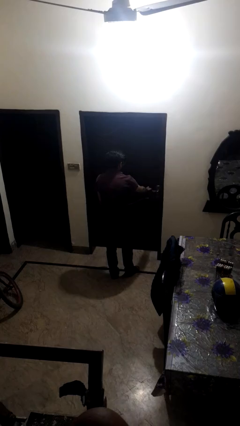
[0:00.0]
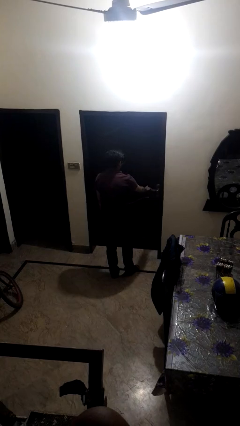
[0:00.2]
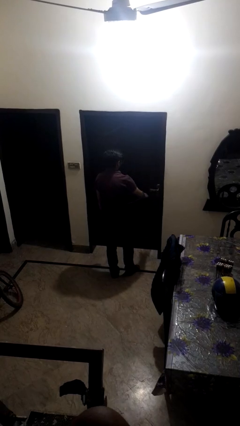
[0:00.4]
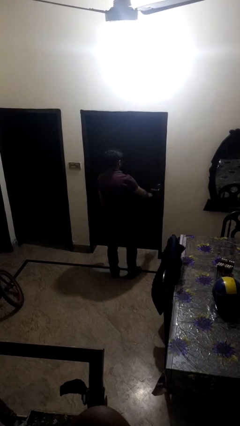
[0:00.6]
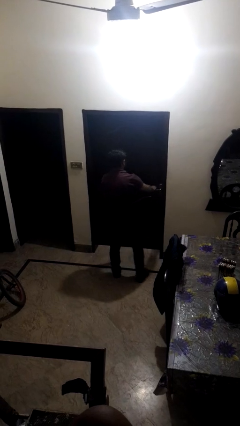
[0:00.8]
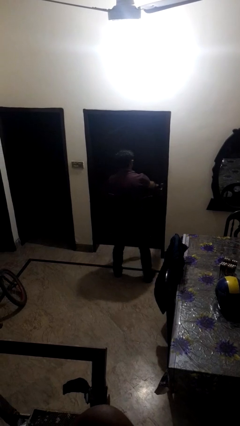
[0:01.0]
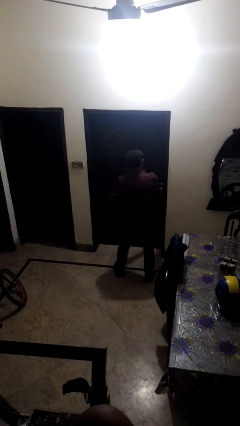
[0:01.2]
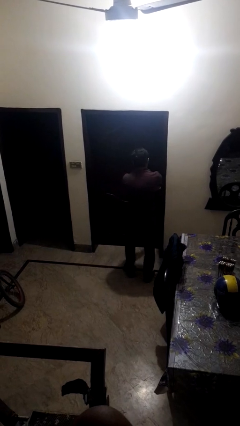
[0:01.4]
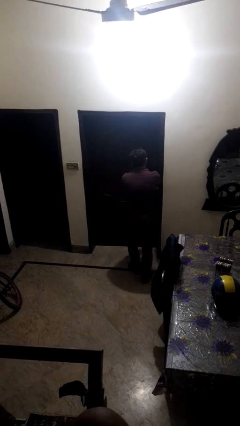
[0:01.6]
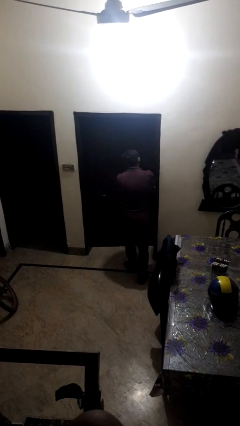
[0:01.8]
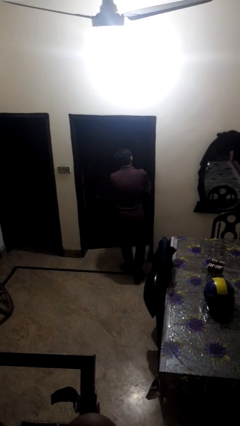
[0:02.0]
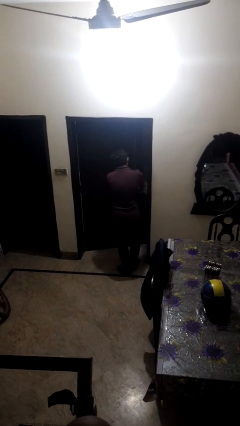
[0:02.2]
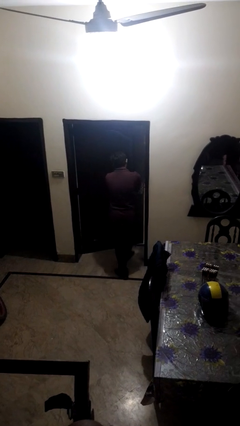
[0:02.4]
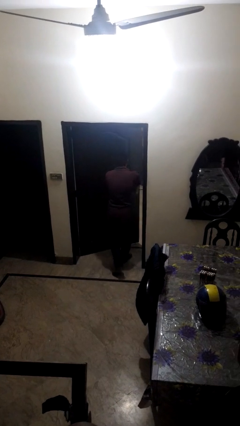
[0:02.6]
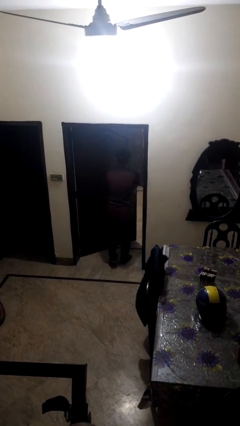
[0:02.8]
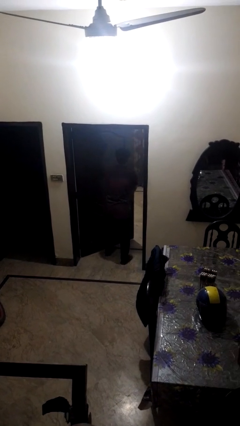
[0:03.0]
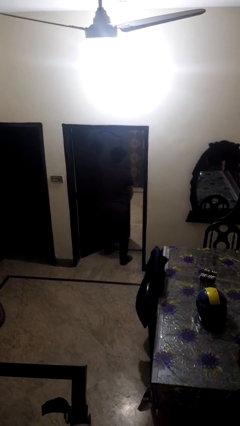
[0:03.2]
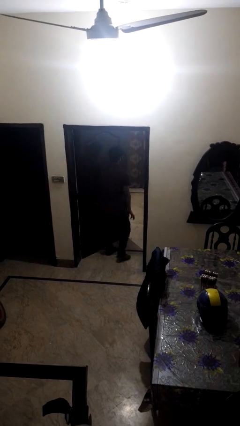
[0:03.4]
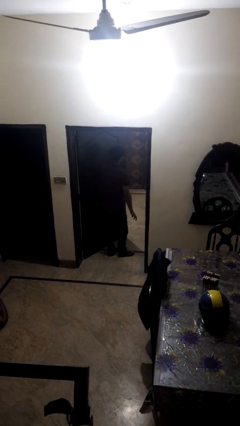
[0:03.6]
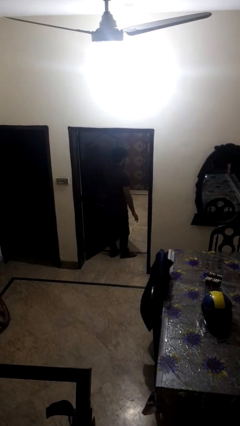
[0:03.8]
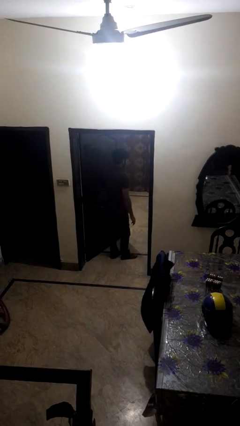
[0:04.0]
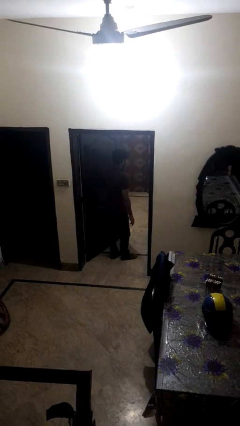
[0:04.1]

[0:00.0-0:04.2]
person opens facility door

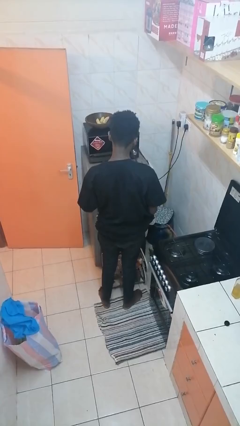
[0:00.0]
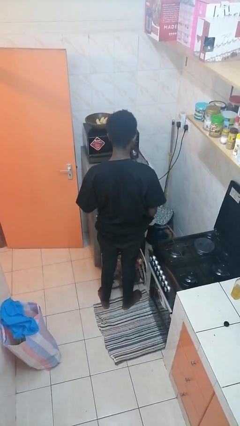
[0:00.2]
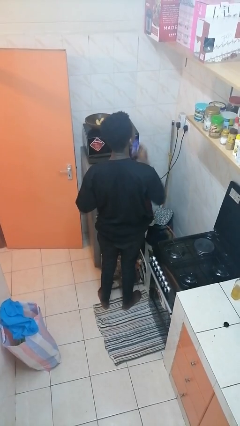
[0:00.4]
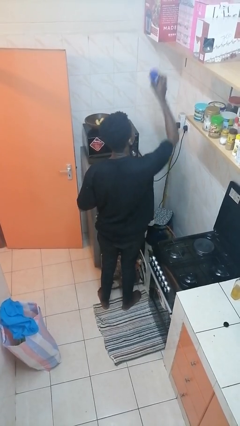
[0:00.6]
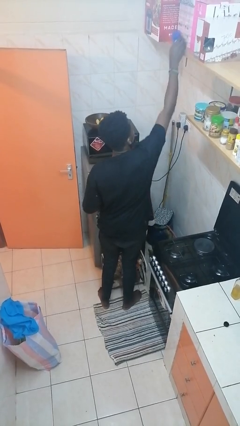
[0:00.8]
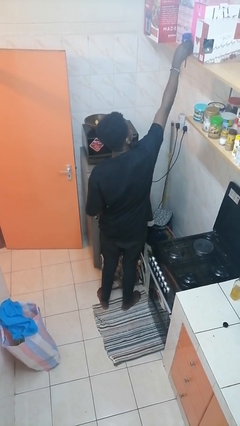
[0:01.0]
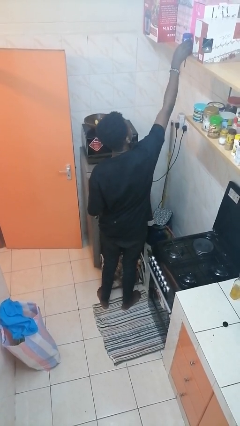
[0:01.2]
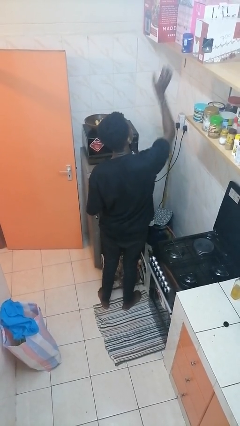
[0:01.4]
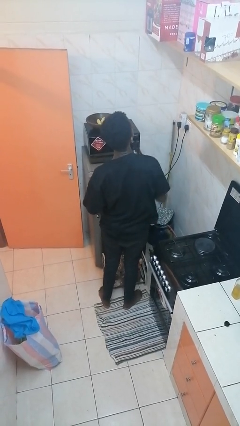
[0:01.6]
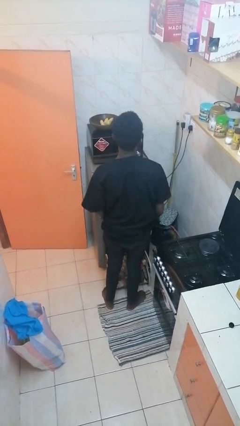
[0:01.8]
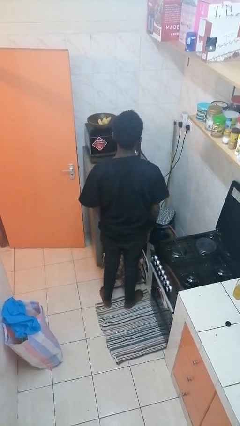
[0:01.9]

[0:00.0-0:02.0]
person puts down object on shelf

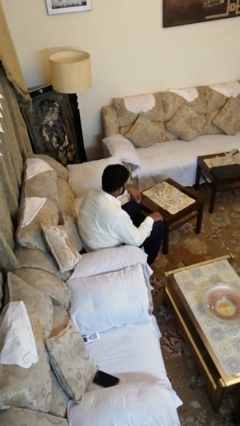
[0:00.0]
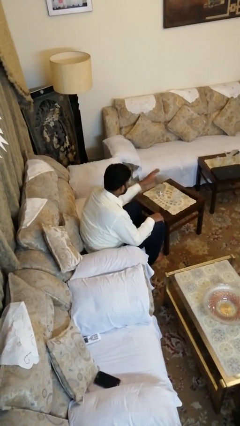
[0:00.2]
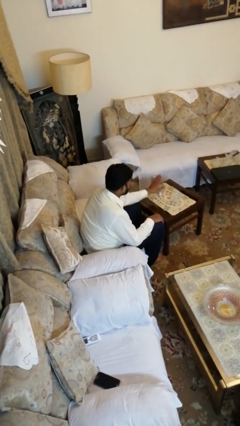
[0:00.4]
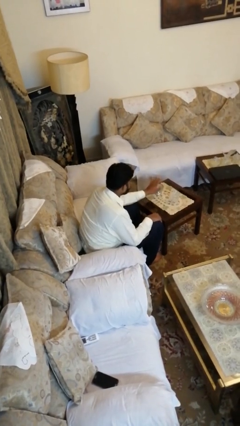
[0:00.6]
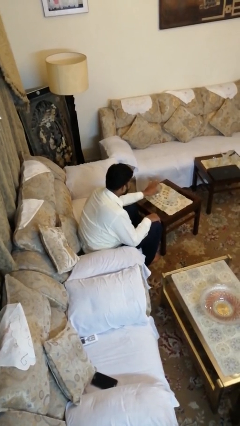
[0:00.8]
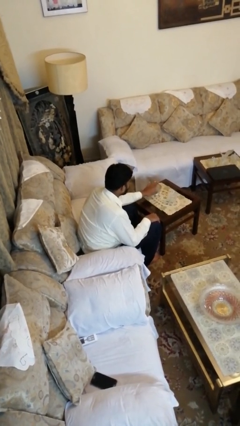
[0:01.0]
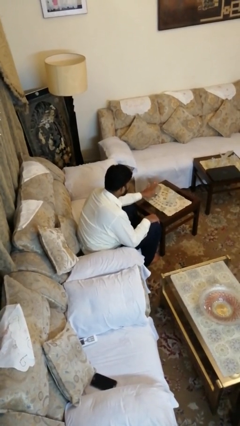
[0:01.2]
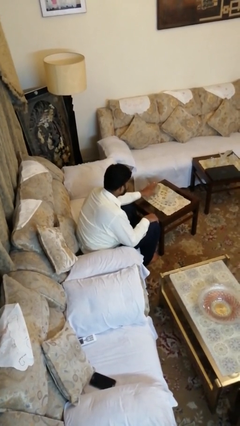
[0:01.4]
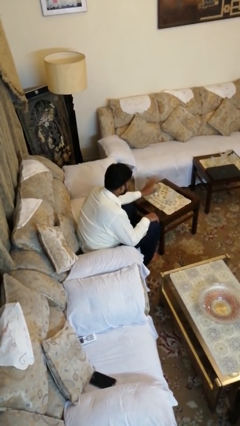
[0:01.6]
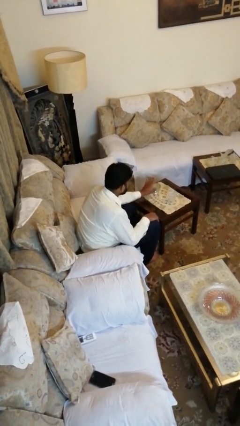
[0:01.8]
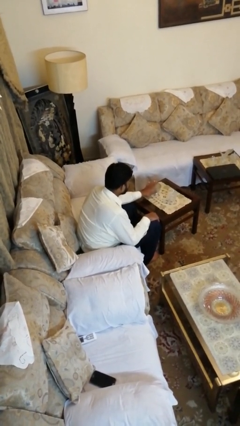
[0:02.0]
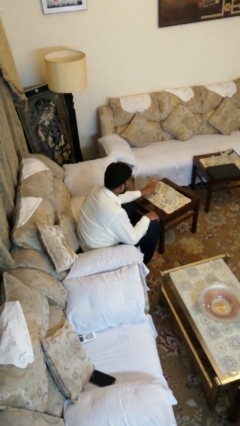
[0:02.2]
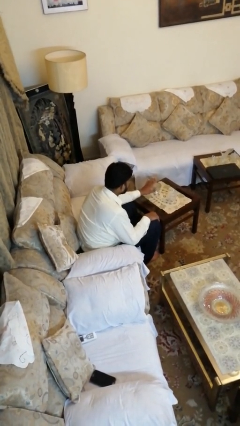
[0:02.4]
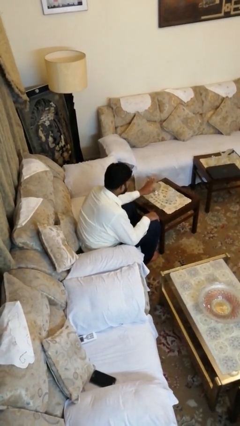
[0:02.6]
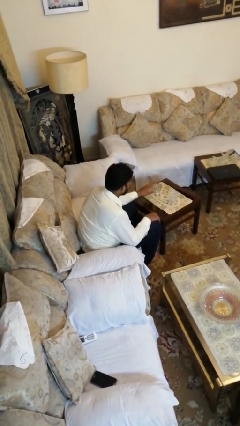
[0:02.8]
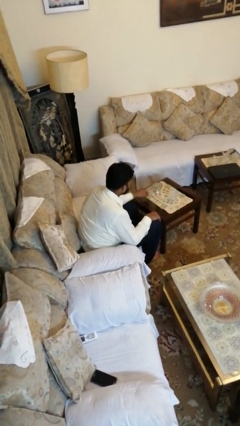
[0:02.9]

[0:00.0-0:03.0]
person taps object with finger

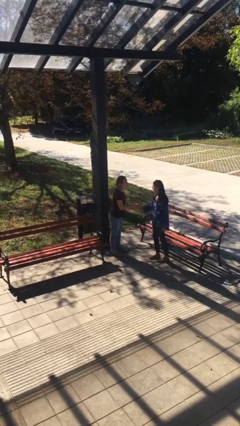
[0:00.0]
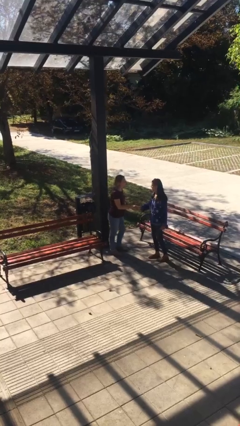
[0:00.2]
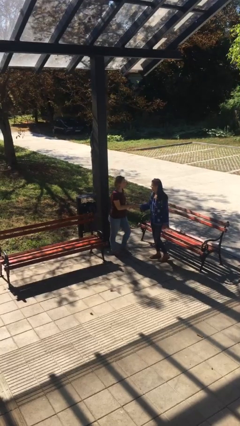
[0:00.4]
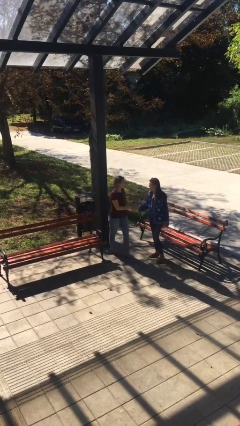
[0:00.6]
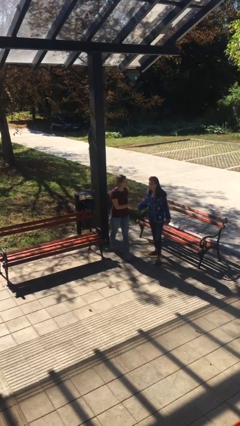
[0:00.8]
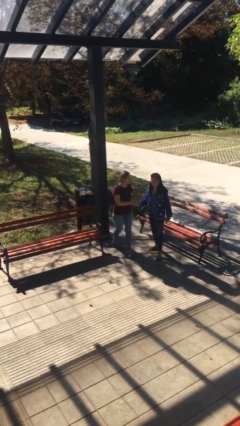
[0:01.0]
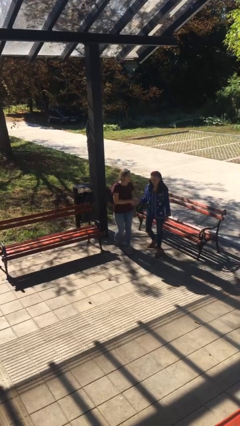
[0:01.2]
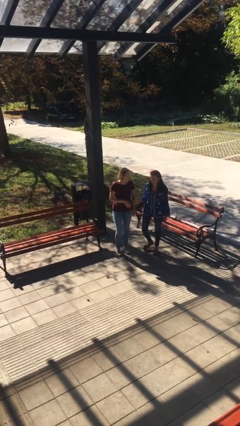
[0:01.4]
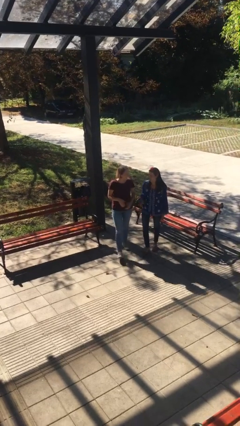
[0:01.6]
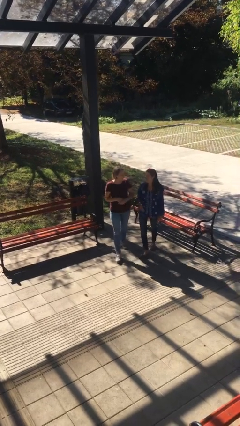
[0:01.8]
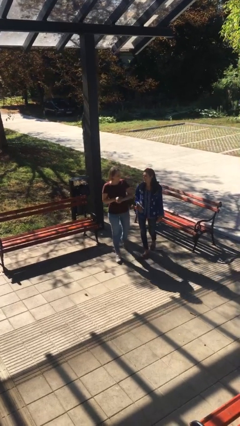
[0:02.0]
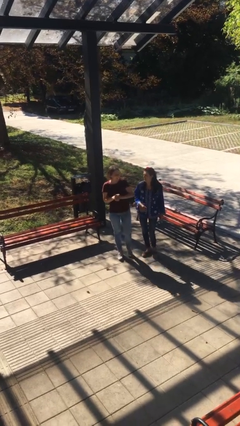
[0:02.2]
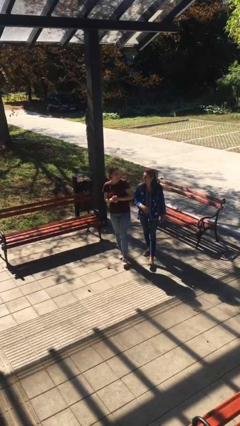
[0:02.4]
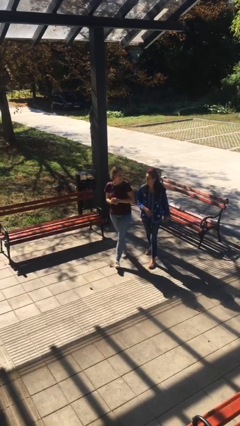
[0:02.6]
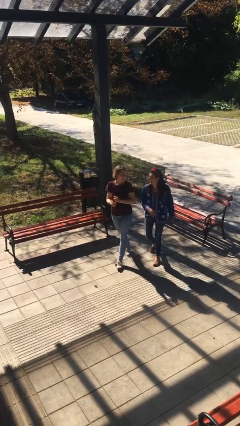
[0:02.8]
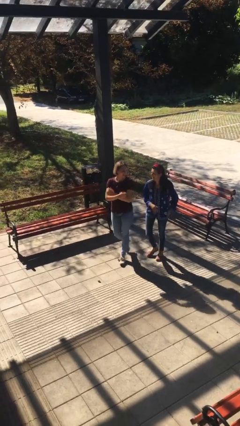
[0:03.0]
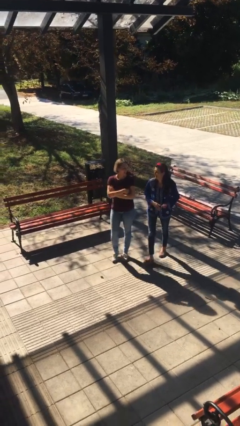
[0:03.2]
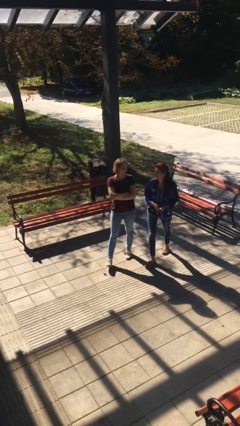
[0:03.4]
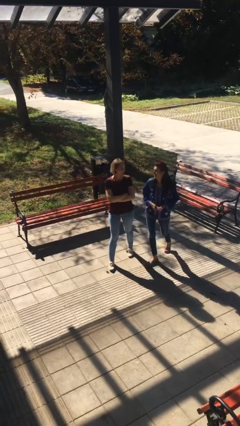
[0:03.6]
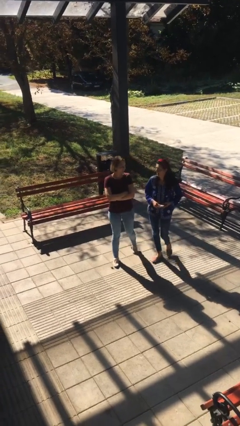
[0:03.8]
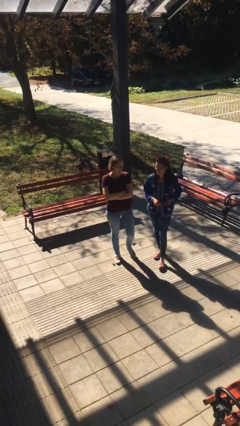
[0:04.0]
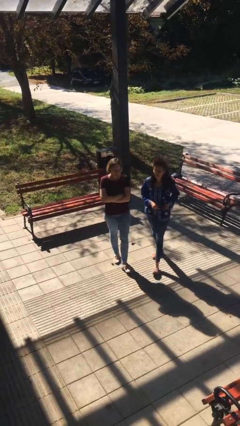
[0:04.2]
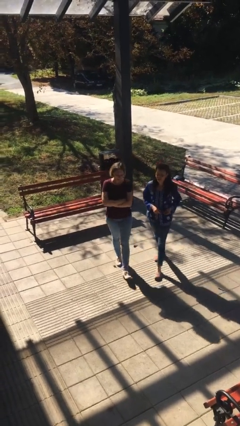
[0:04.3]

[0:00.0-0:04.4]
person talks to person

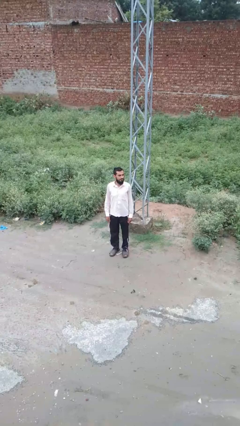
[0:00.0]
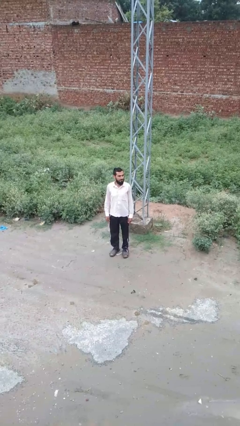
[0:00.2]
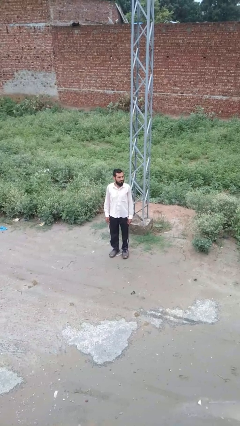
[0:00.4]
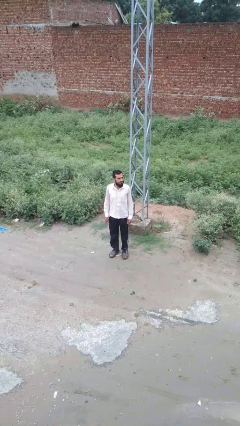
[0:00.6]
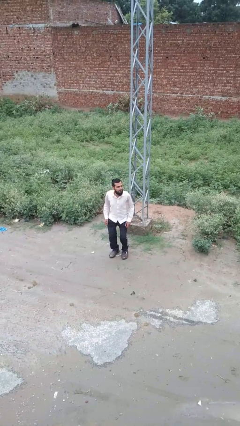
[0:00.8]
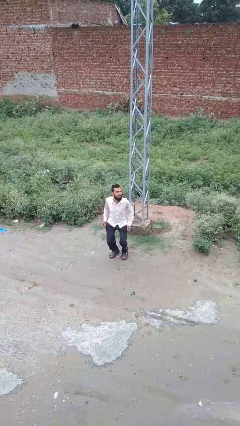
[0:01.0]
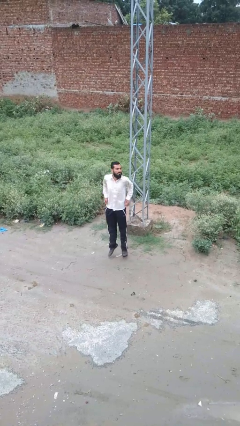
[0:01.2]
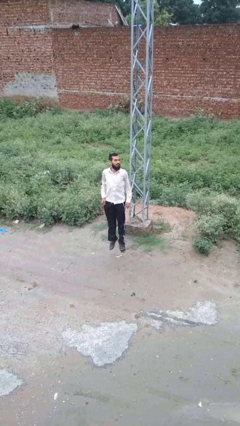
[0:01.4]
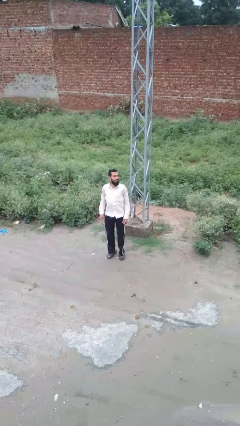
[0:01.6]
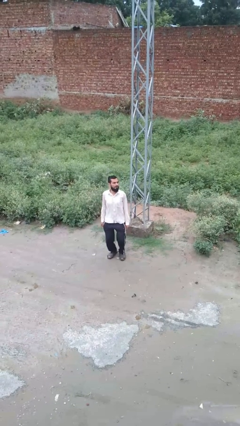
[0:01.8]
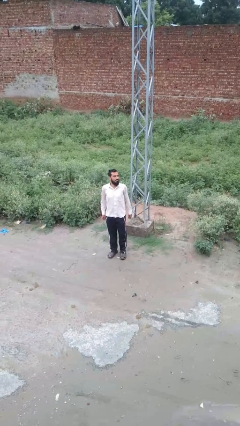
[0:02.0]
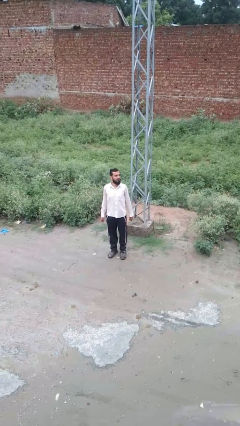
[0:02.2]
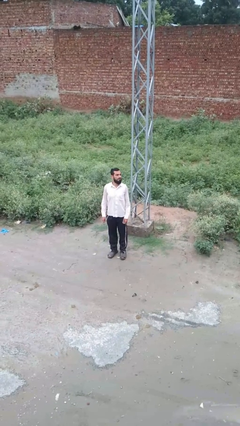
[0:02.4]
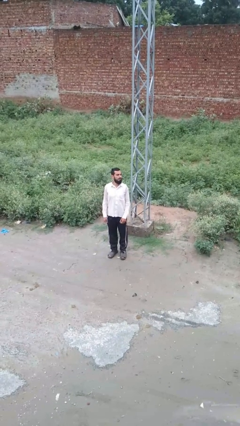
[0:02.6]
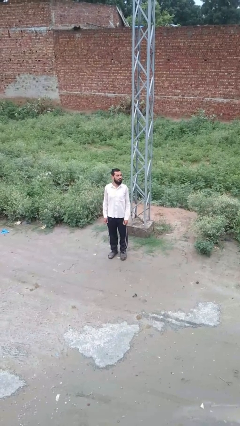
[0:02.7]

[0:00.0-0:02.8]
person jumps

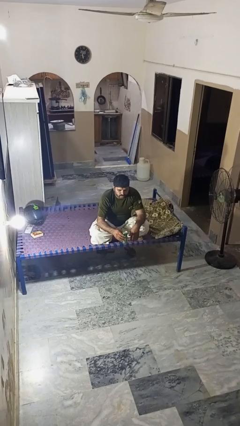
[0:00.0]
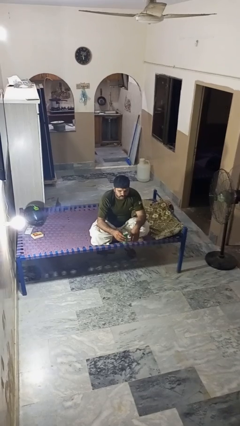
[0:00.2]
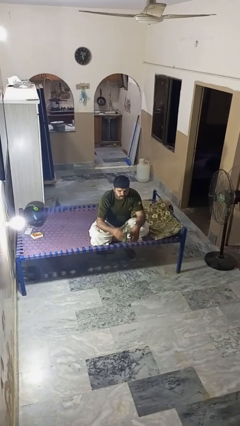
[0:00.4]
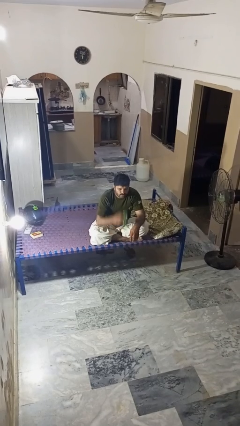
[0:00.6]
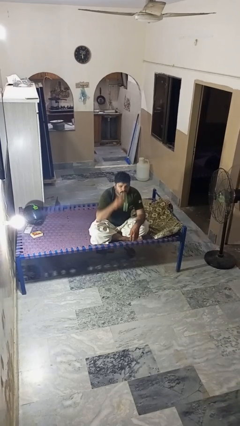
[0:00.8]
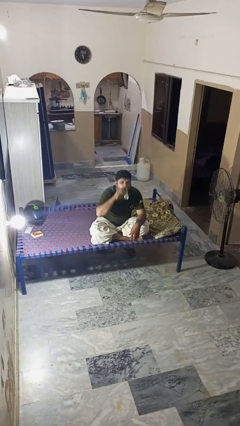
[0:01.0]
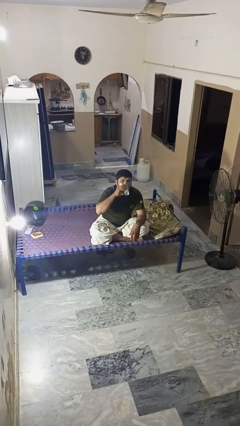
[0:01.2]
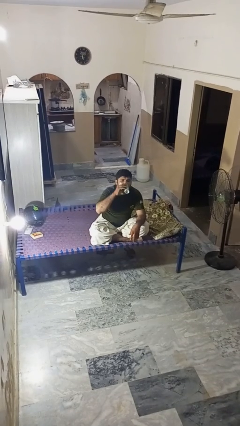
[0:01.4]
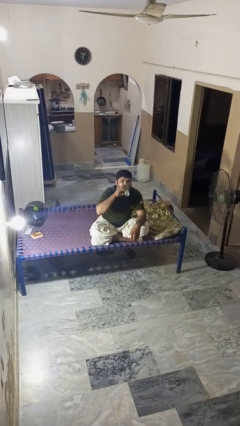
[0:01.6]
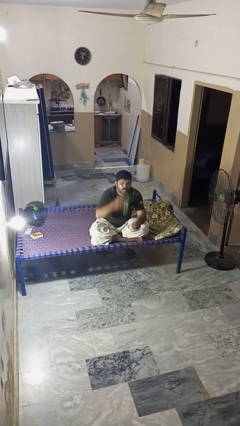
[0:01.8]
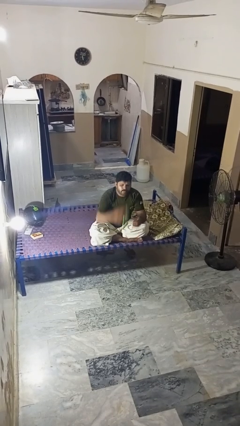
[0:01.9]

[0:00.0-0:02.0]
person drinks from beverage can
